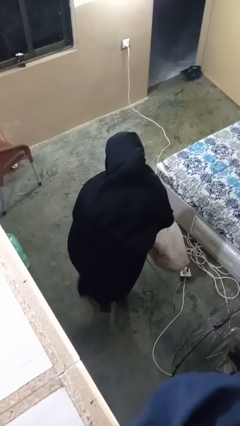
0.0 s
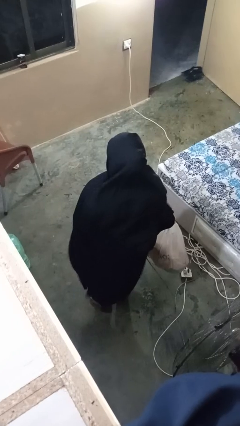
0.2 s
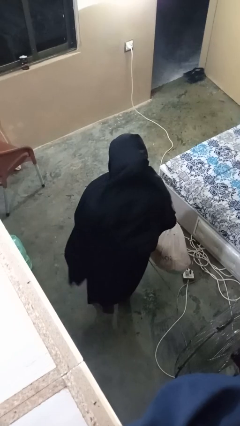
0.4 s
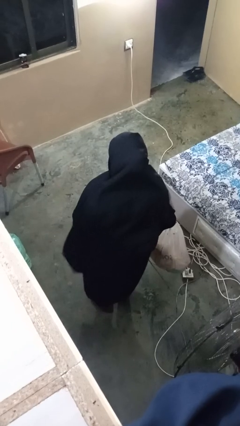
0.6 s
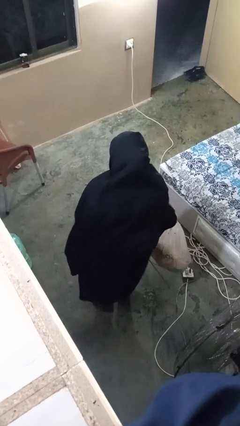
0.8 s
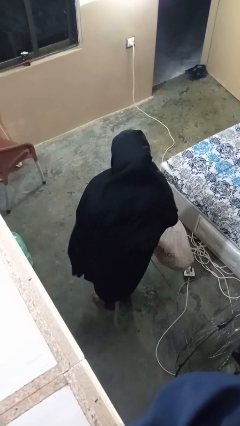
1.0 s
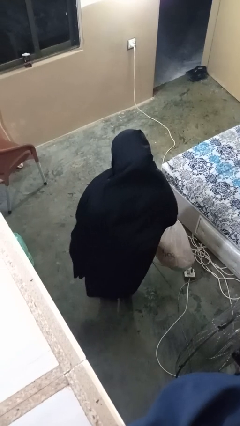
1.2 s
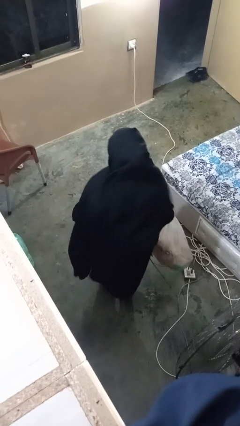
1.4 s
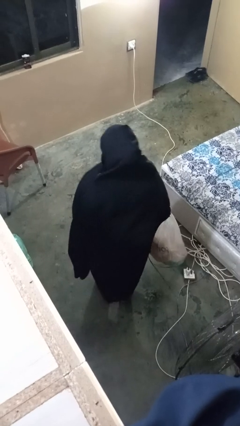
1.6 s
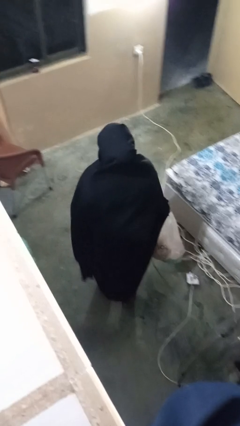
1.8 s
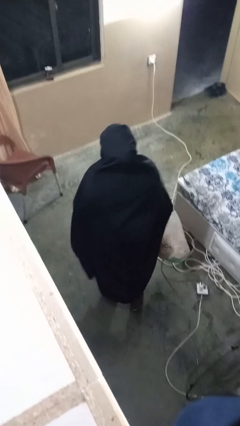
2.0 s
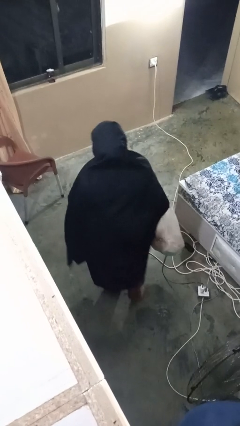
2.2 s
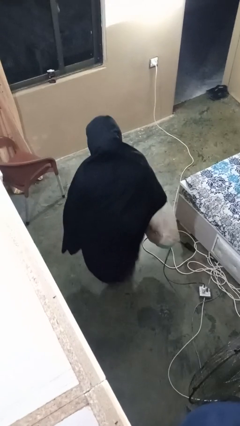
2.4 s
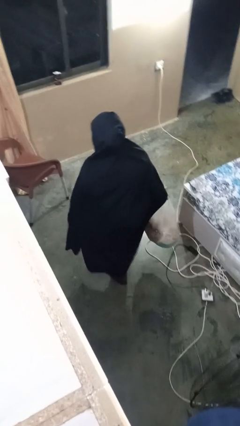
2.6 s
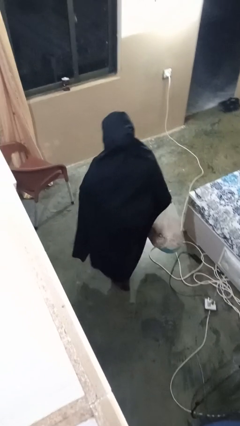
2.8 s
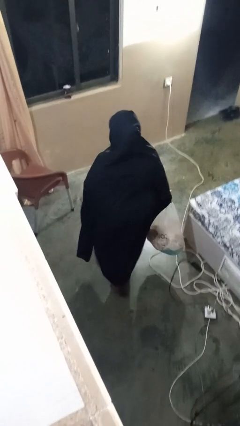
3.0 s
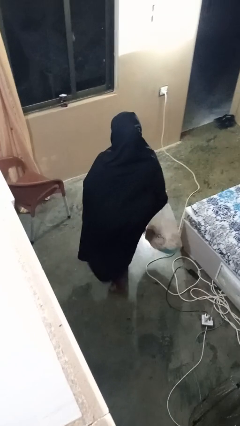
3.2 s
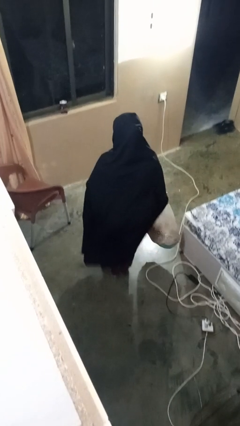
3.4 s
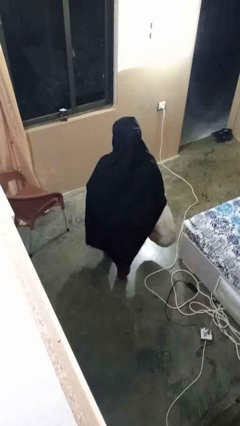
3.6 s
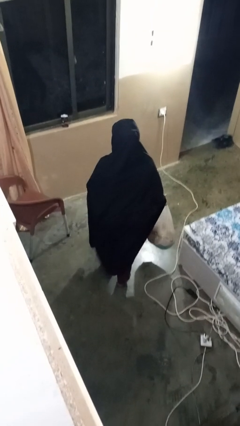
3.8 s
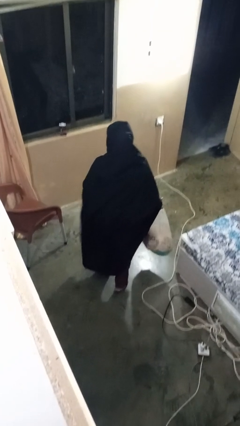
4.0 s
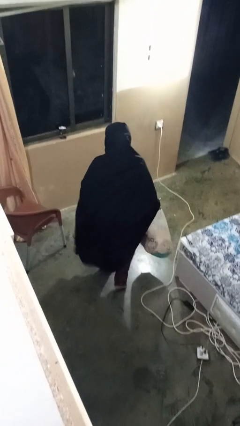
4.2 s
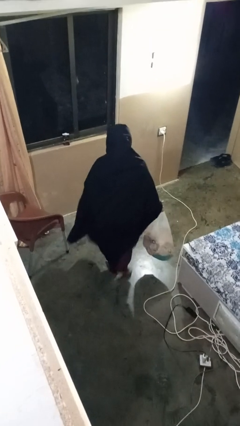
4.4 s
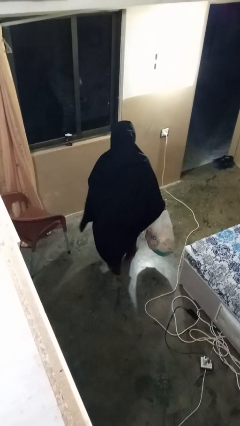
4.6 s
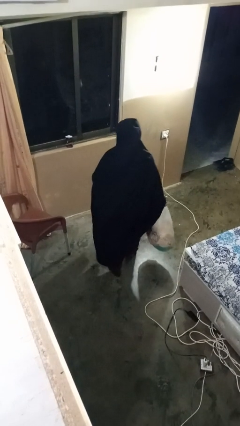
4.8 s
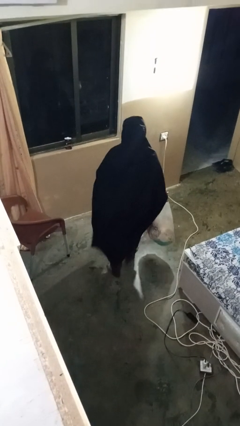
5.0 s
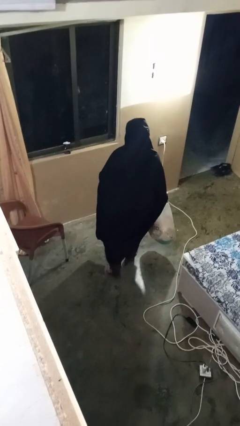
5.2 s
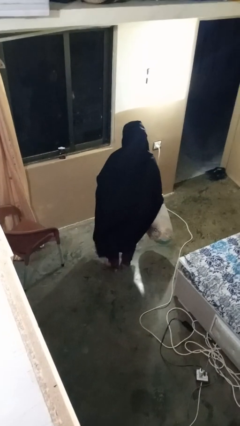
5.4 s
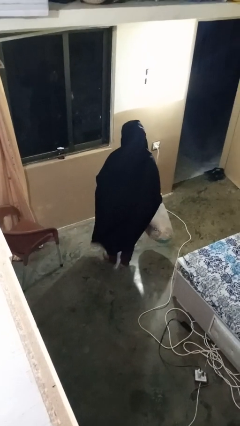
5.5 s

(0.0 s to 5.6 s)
person carries groceries

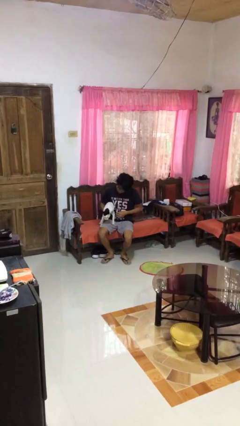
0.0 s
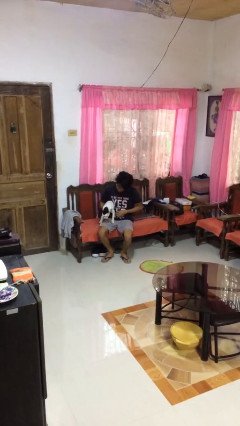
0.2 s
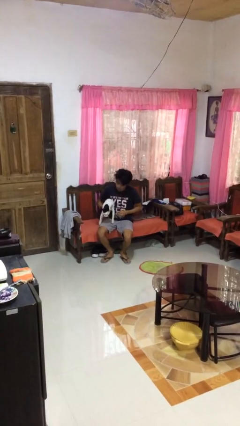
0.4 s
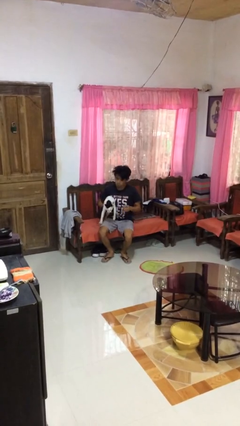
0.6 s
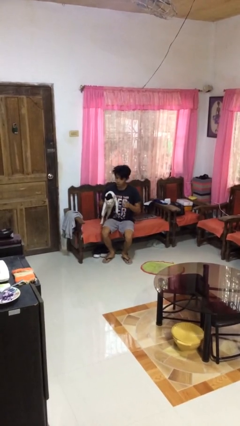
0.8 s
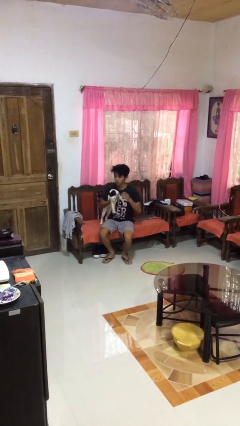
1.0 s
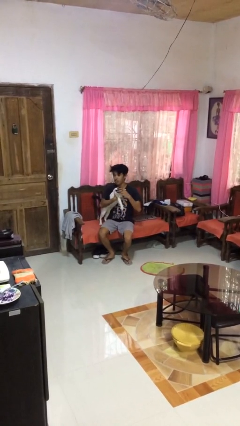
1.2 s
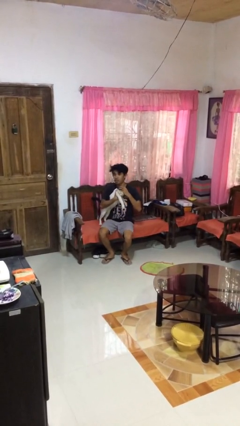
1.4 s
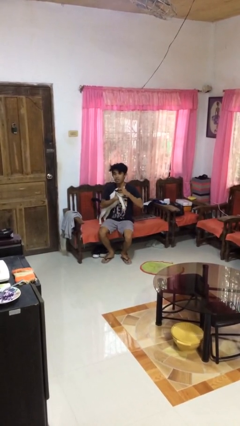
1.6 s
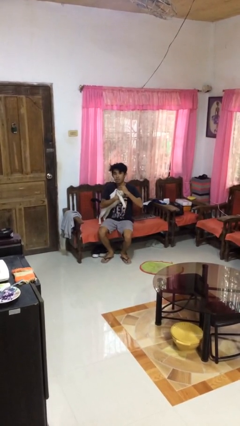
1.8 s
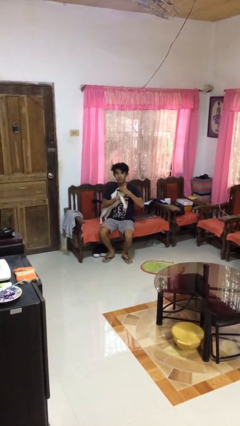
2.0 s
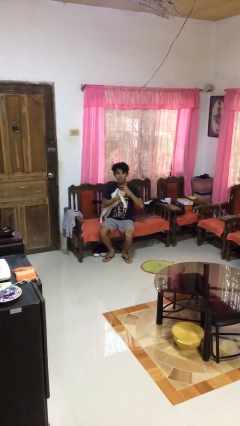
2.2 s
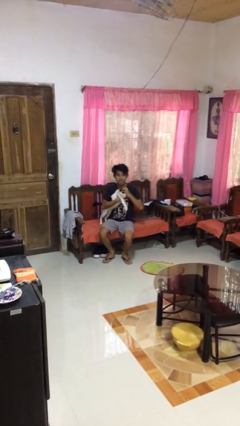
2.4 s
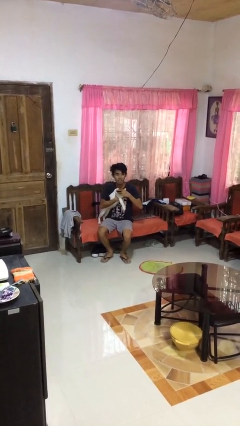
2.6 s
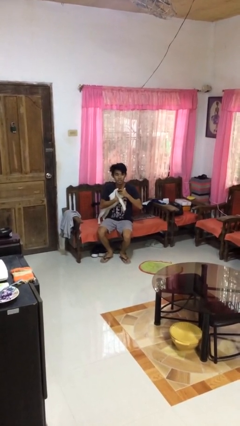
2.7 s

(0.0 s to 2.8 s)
person hugs cat

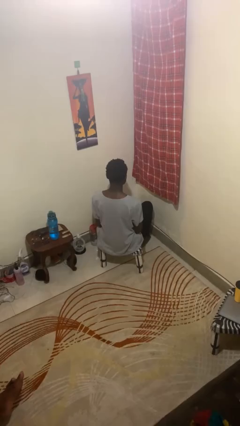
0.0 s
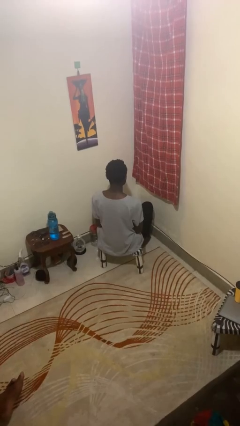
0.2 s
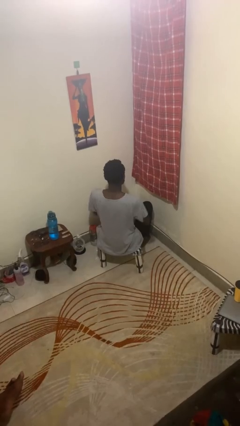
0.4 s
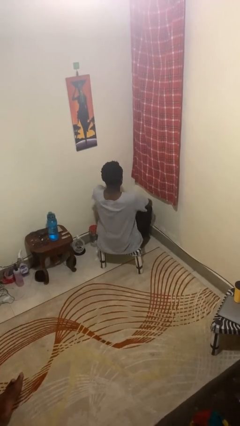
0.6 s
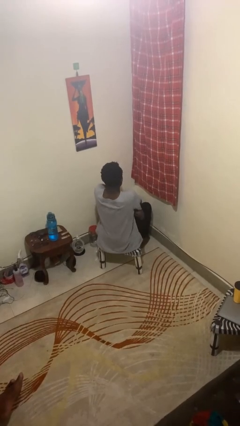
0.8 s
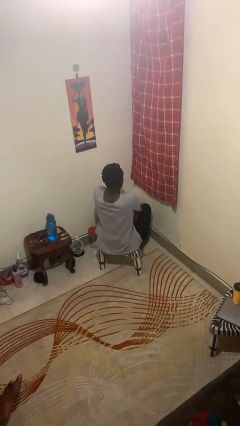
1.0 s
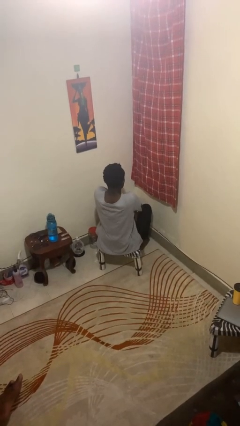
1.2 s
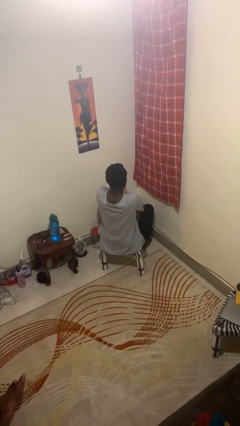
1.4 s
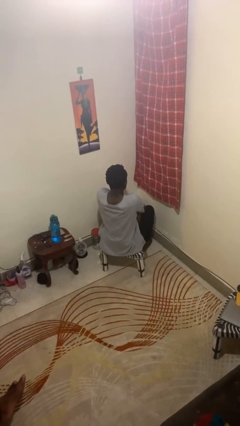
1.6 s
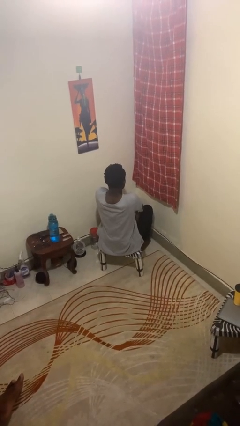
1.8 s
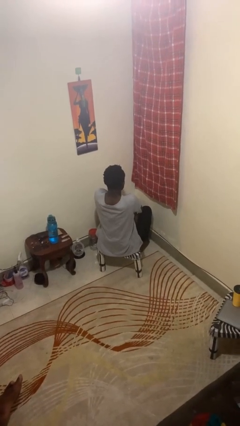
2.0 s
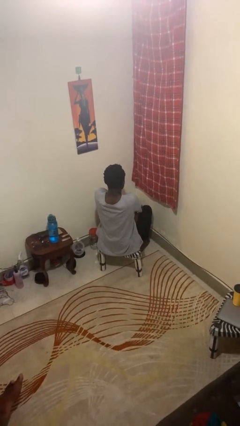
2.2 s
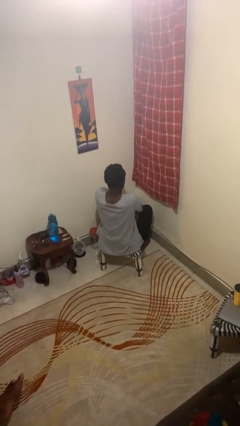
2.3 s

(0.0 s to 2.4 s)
person crosses arms

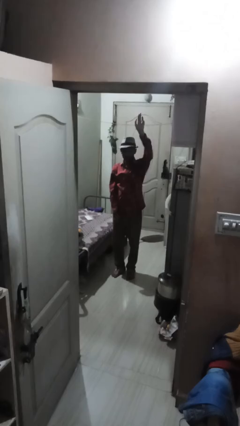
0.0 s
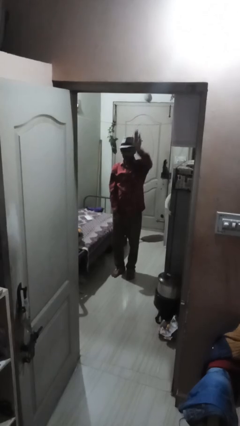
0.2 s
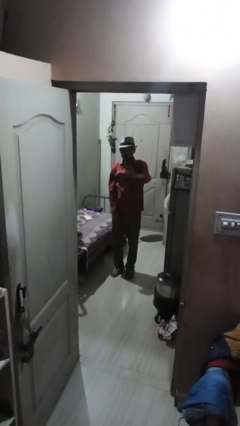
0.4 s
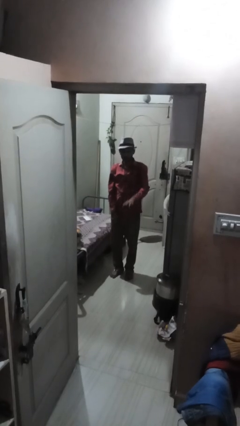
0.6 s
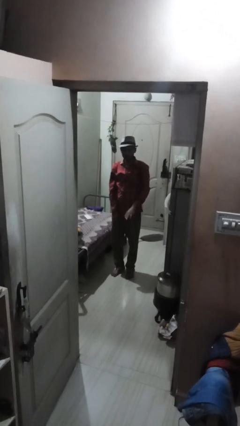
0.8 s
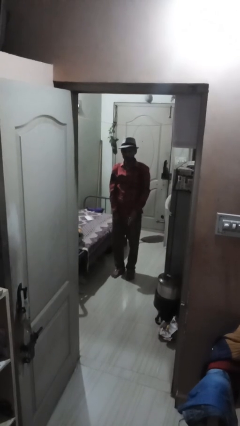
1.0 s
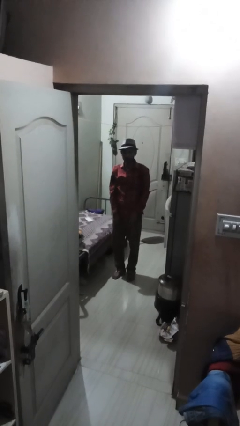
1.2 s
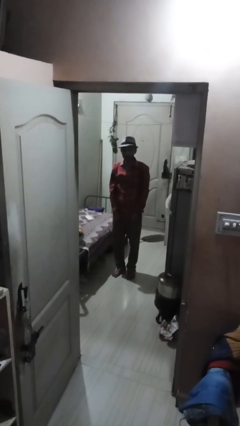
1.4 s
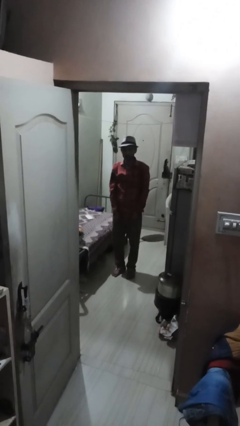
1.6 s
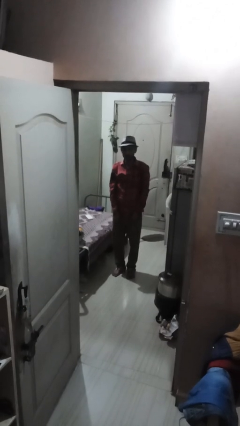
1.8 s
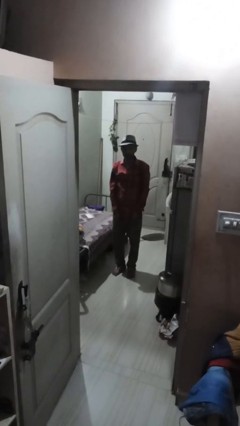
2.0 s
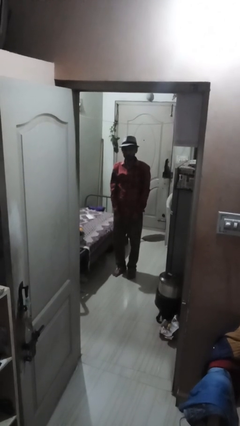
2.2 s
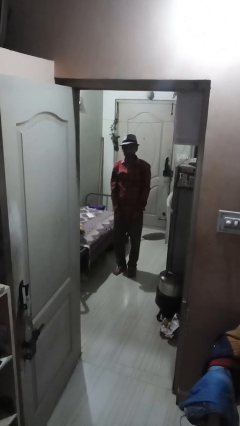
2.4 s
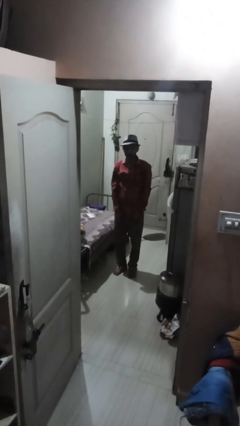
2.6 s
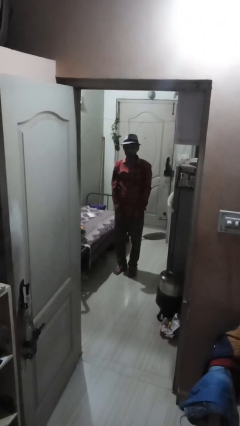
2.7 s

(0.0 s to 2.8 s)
person gestures swipe down

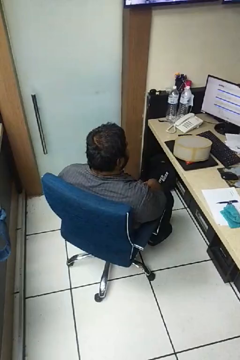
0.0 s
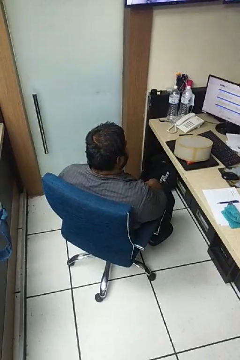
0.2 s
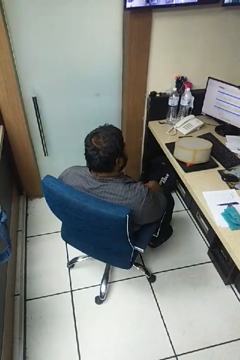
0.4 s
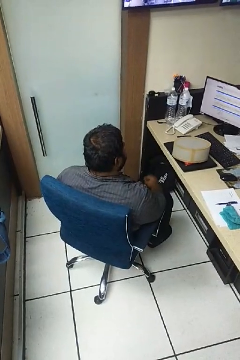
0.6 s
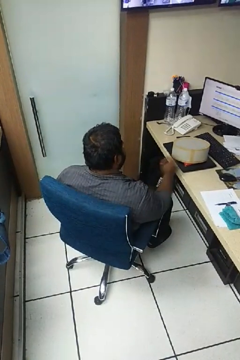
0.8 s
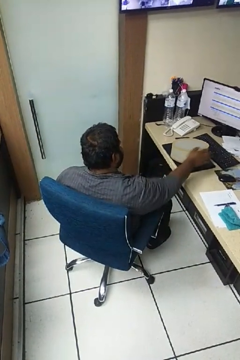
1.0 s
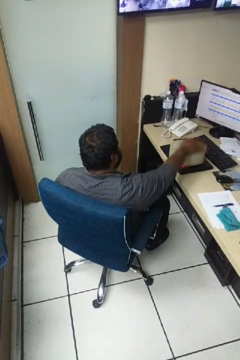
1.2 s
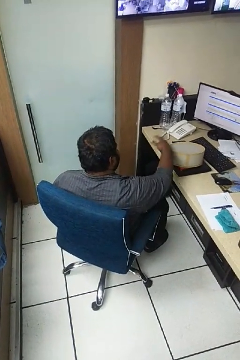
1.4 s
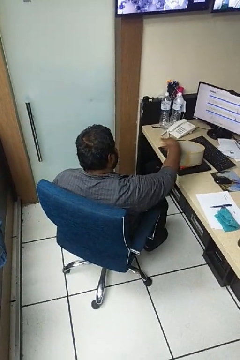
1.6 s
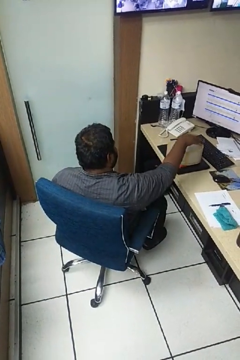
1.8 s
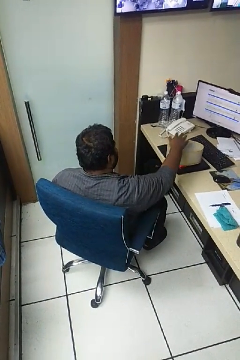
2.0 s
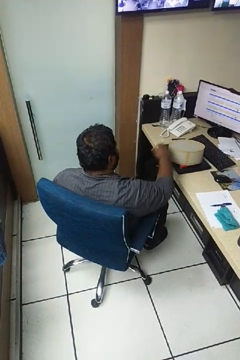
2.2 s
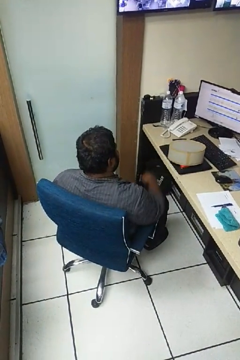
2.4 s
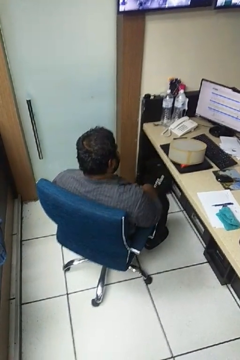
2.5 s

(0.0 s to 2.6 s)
person waves hand over object

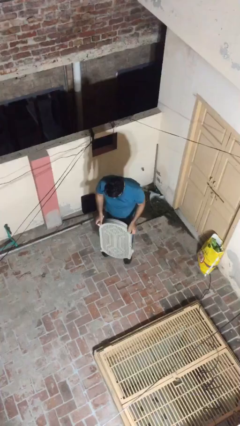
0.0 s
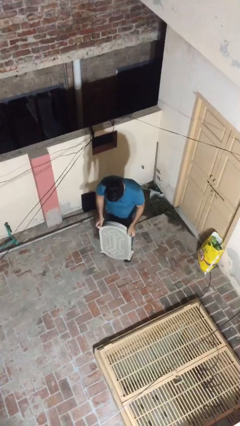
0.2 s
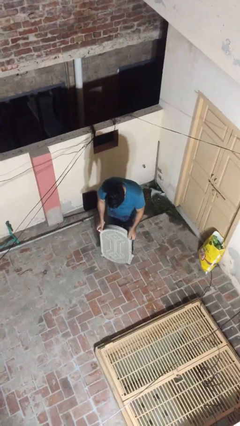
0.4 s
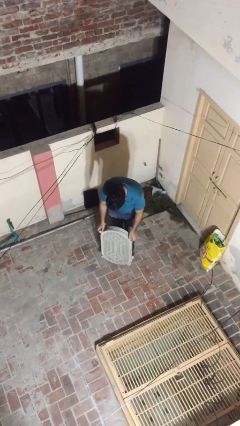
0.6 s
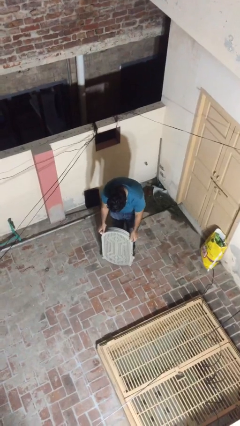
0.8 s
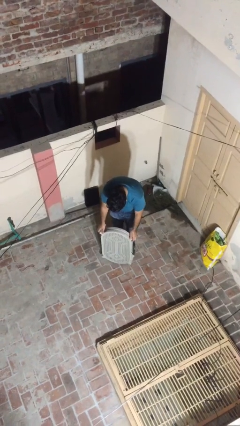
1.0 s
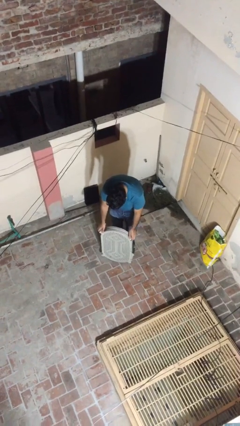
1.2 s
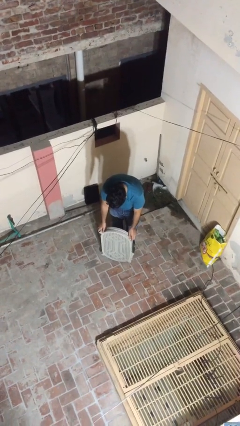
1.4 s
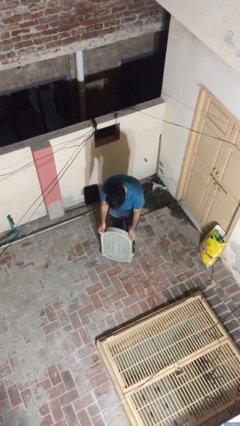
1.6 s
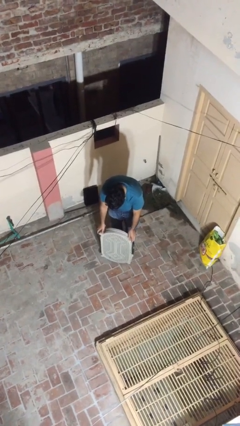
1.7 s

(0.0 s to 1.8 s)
person puts down object on floor

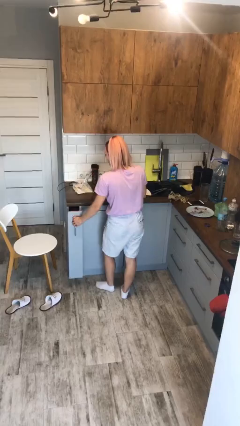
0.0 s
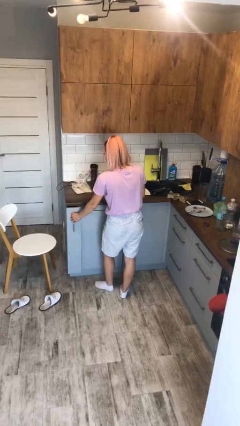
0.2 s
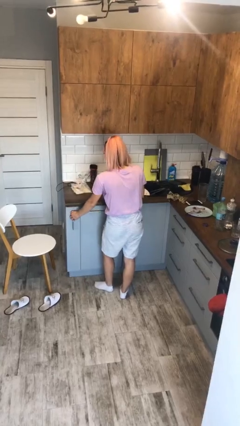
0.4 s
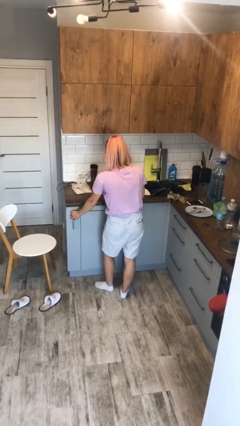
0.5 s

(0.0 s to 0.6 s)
person closes cabinet
